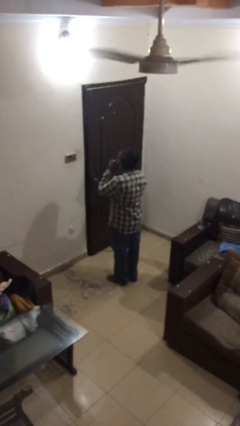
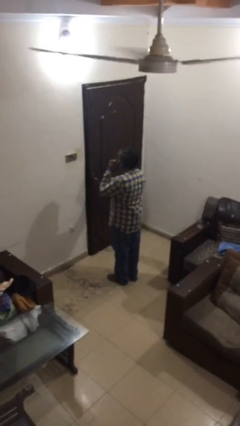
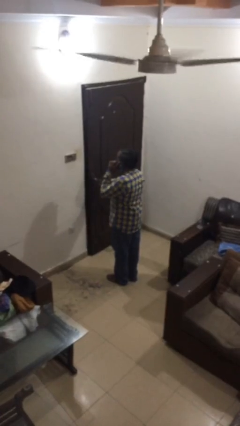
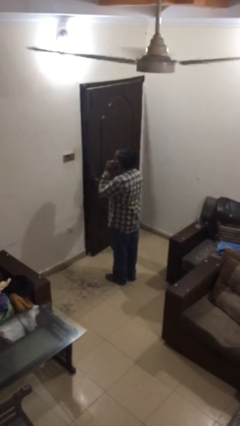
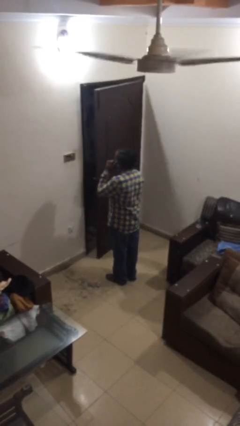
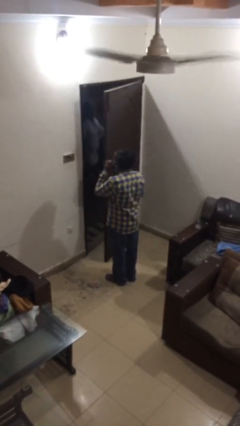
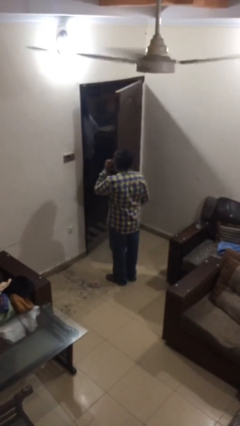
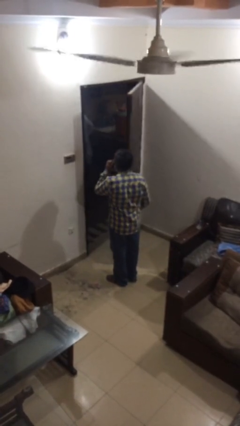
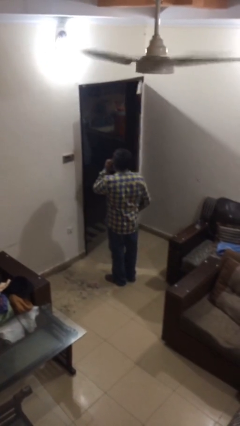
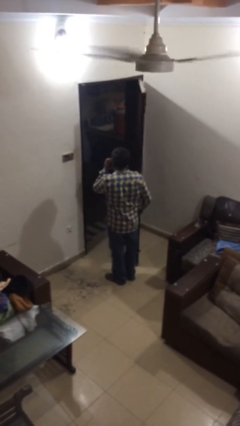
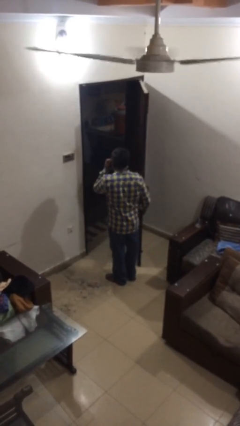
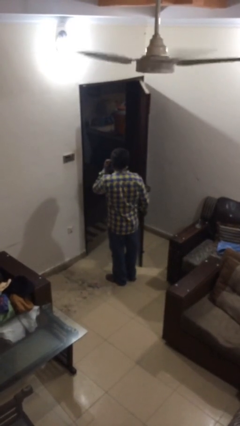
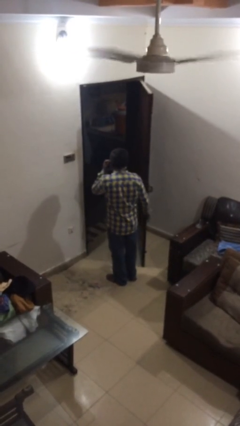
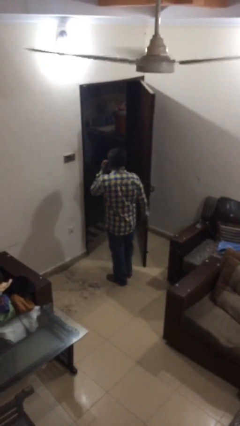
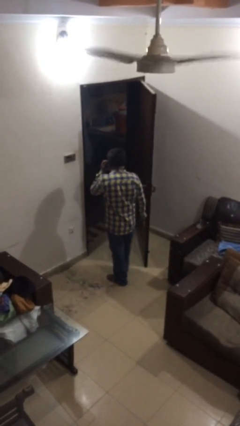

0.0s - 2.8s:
person opens facility door

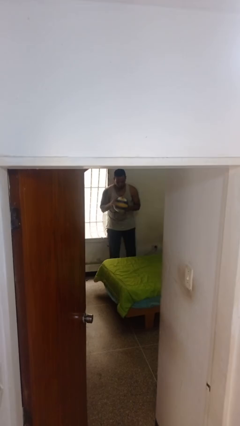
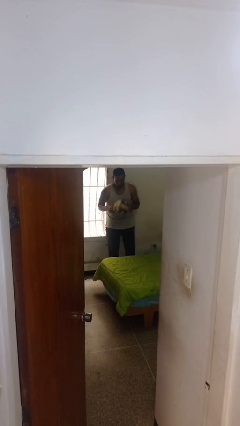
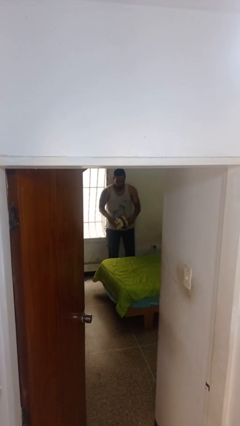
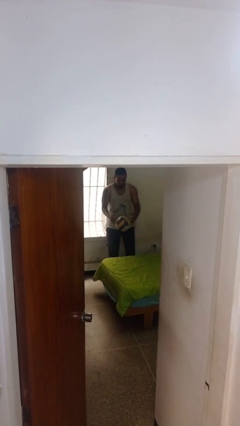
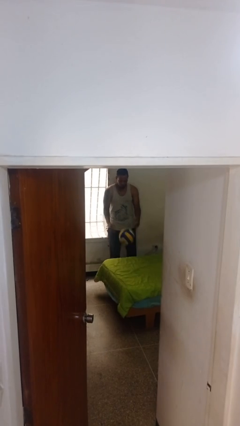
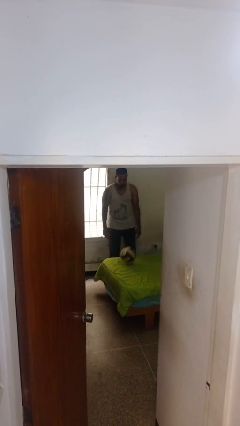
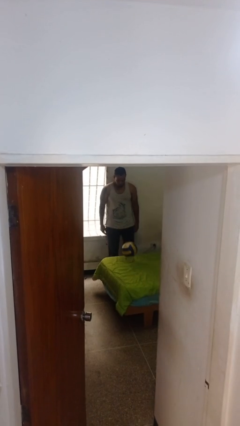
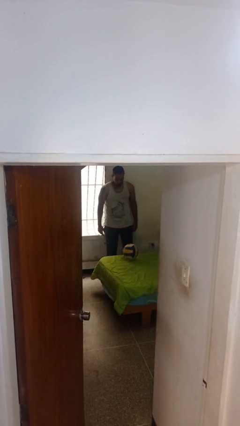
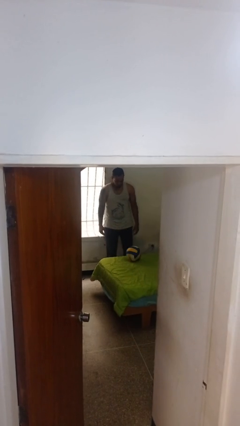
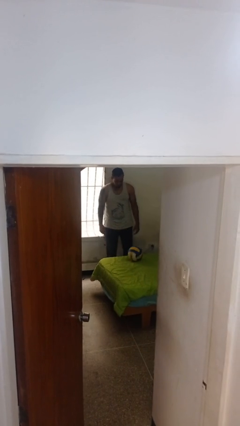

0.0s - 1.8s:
person throws object on bed

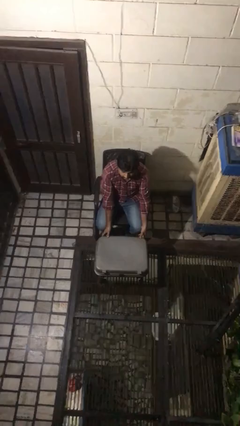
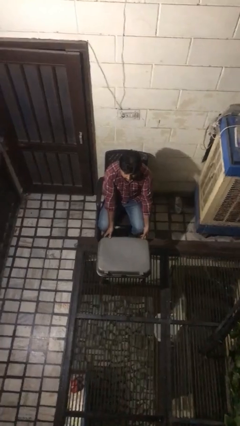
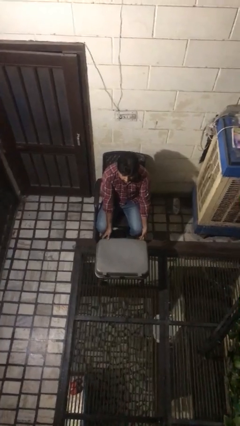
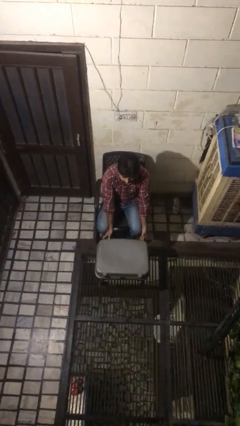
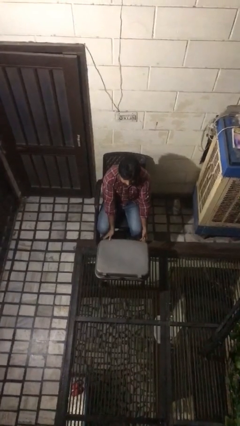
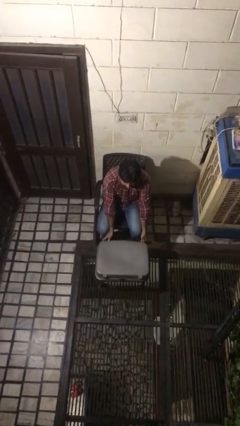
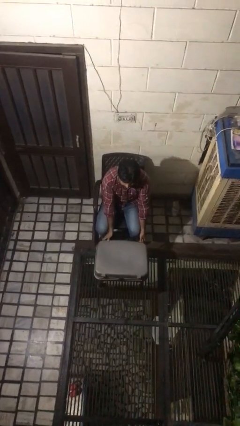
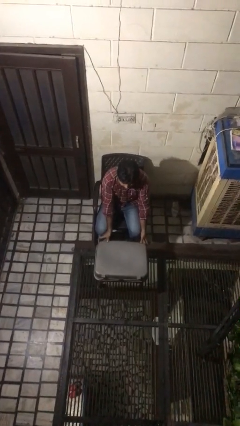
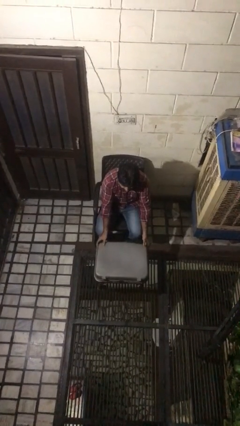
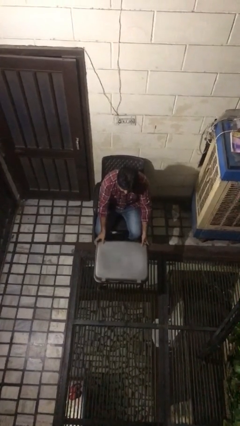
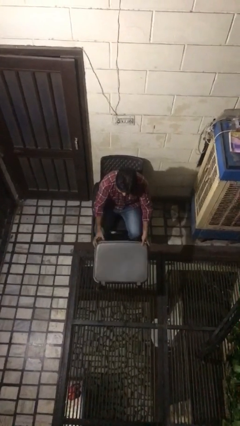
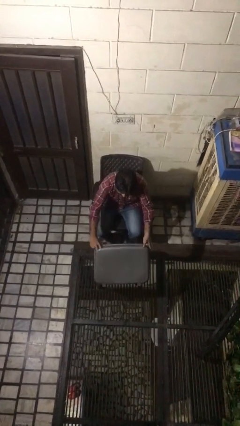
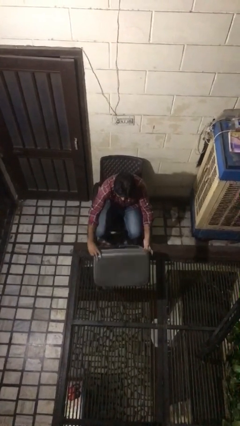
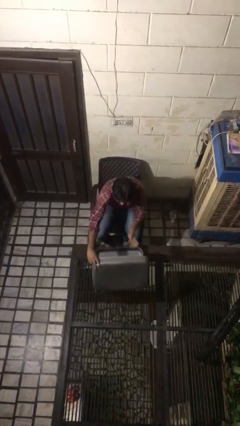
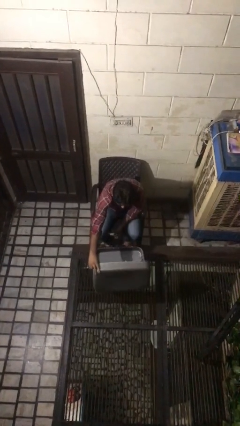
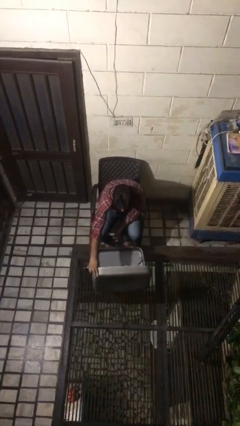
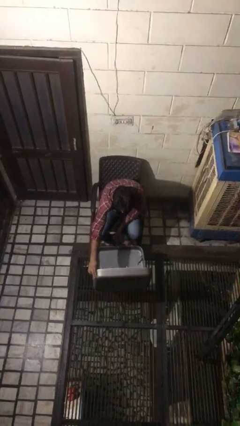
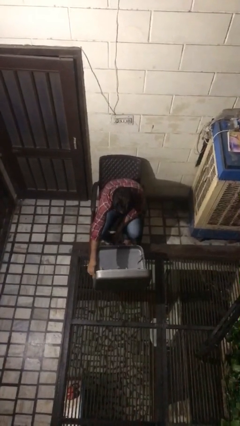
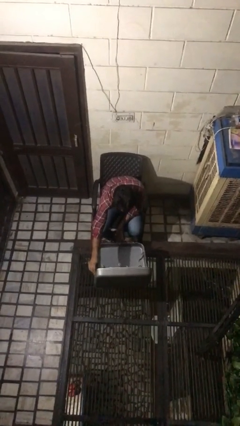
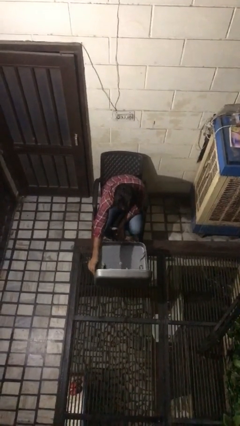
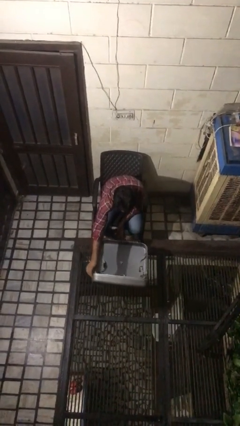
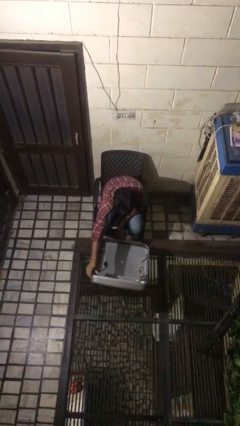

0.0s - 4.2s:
person opens suitcase

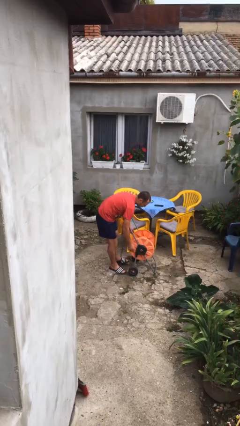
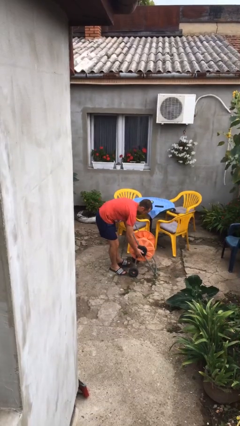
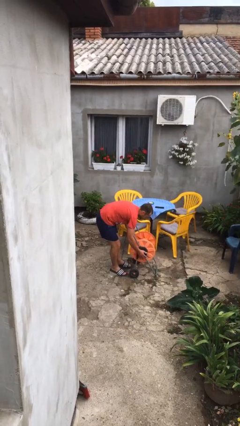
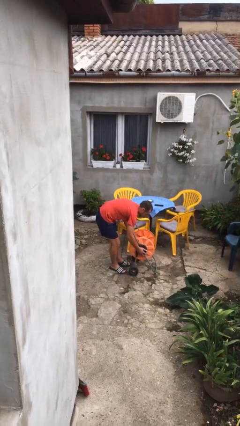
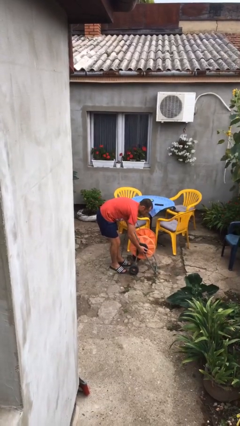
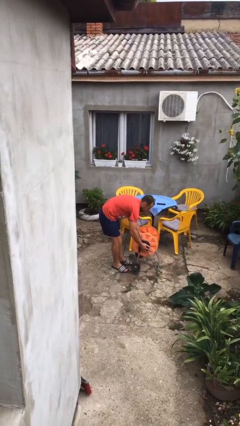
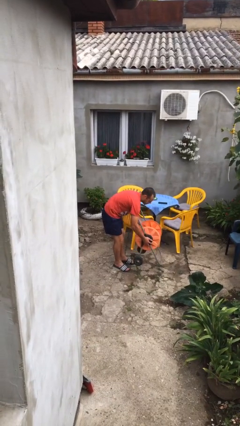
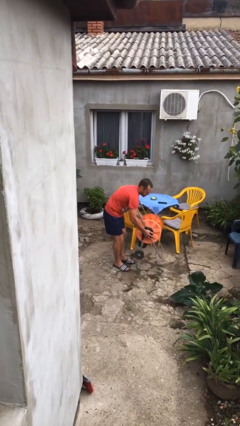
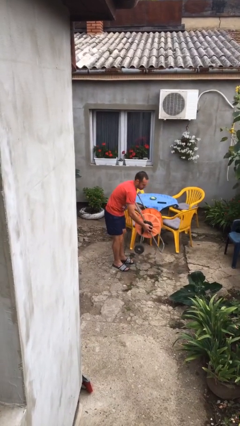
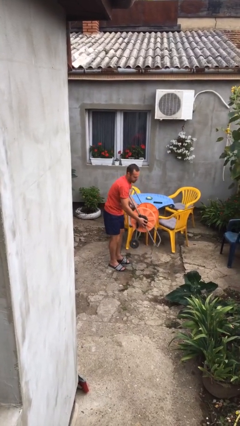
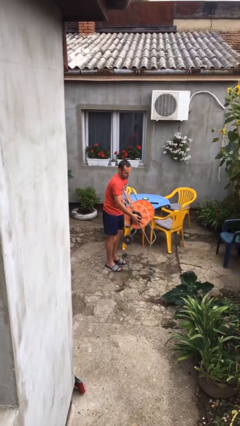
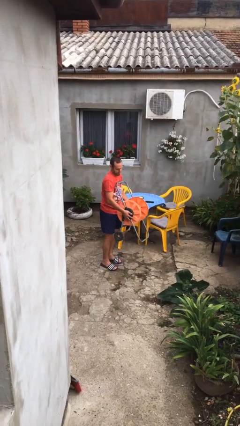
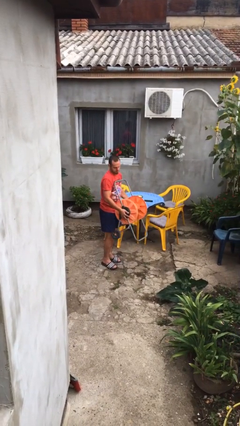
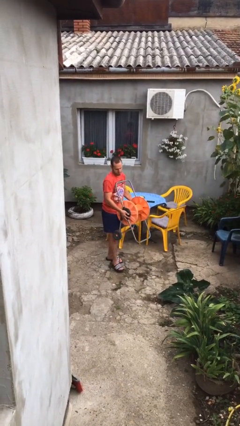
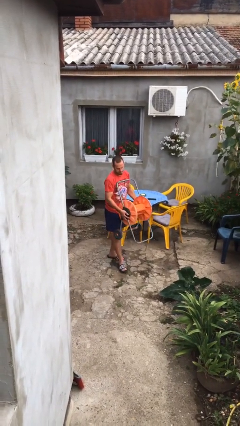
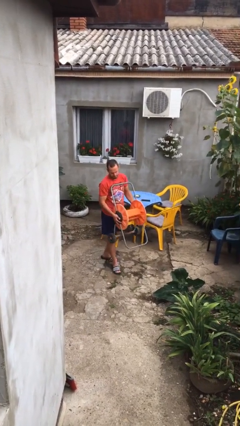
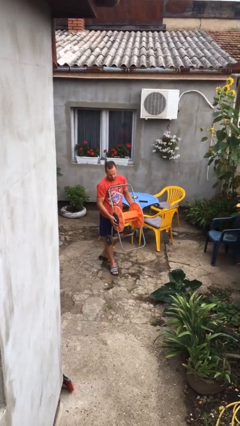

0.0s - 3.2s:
person picks up object from floor

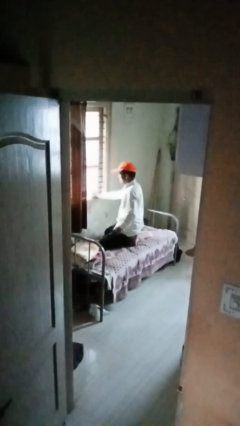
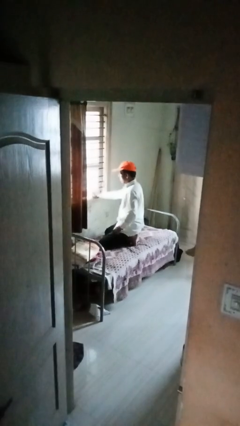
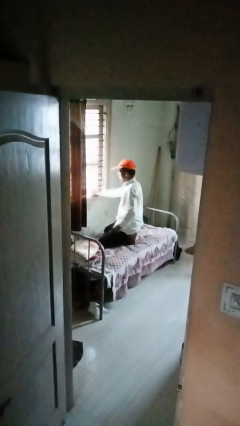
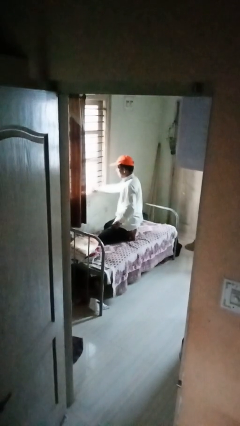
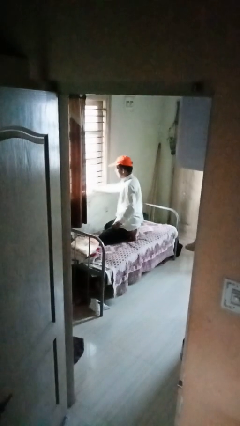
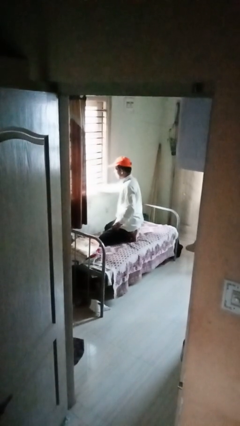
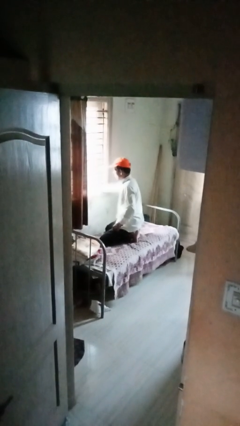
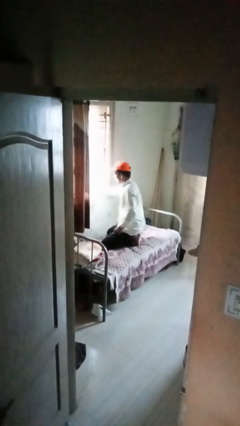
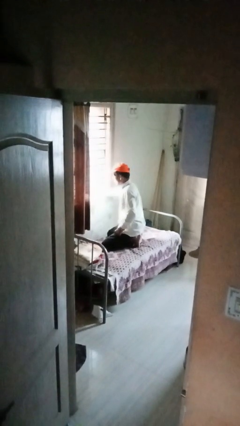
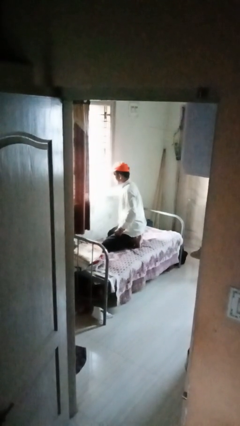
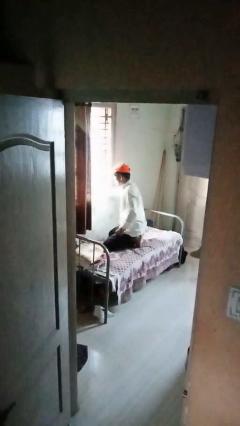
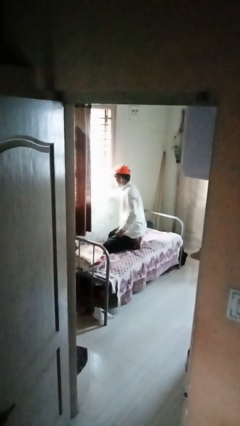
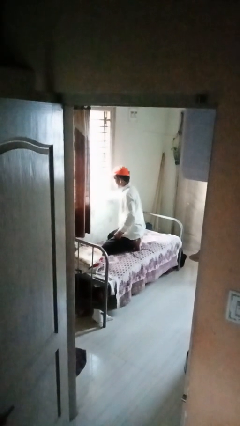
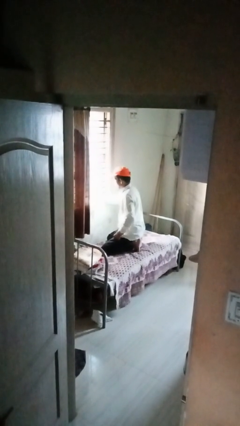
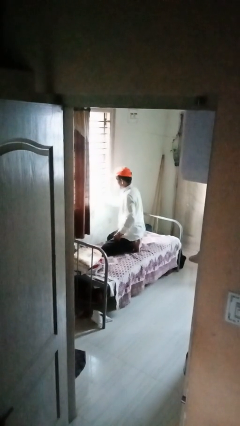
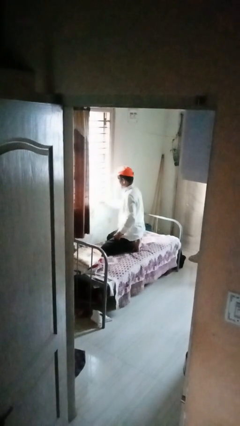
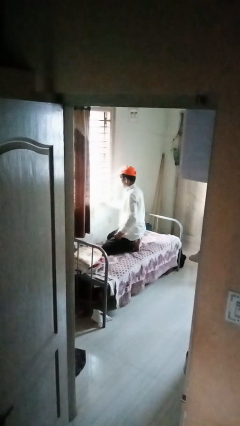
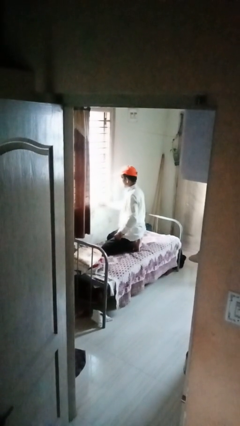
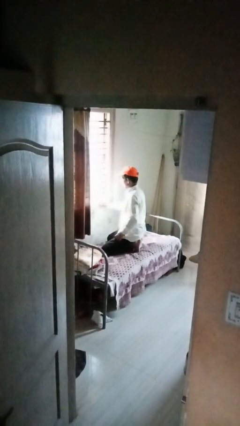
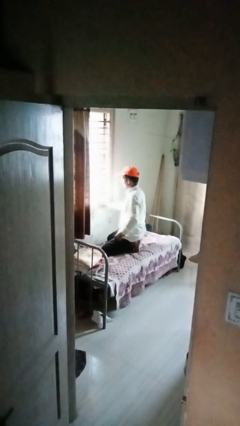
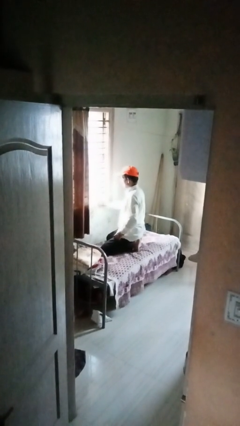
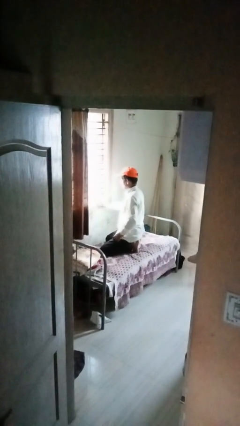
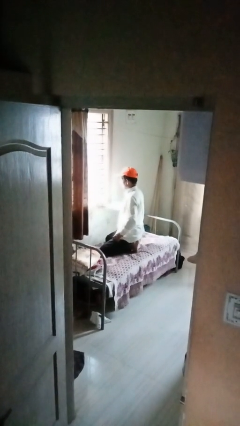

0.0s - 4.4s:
person opens home window

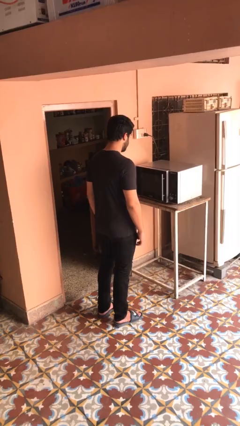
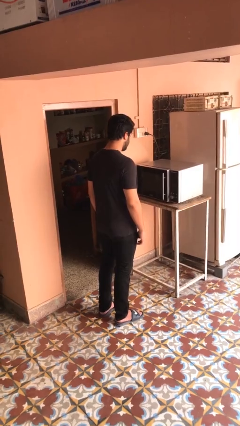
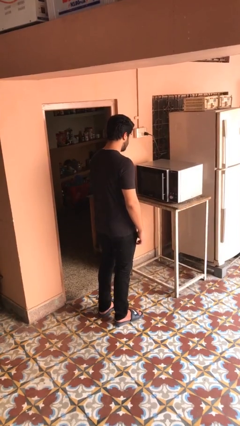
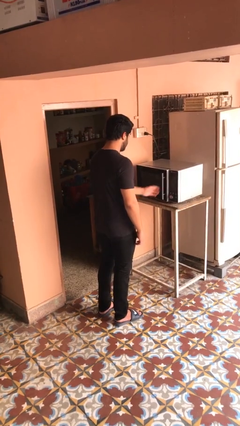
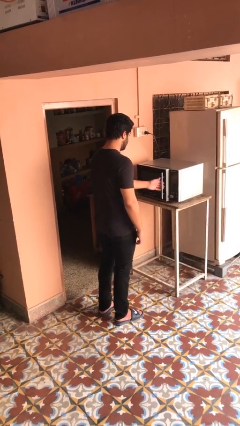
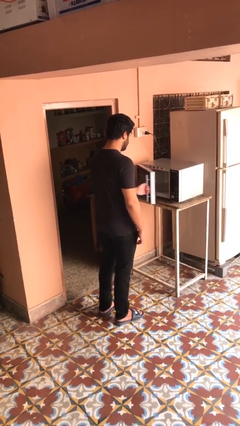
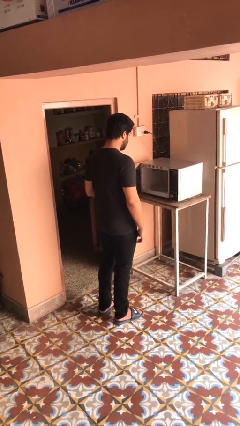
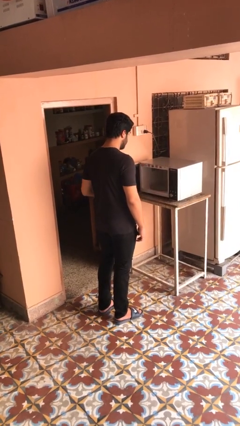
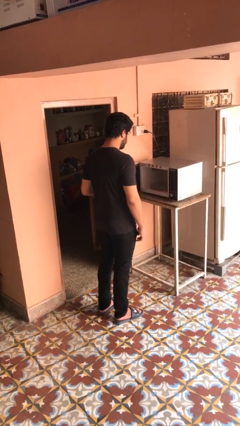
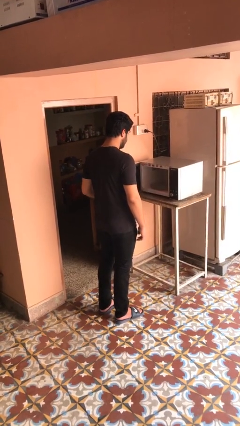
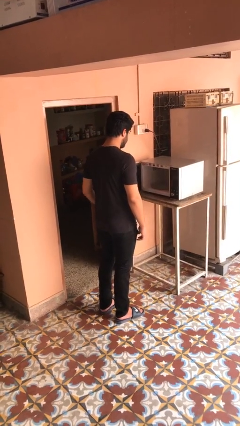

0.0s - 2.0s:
person opens microwave
